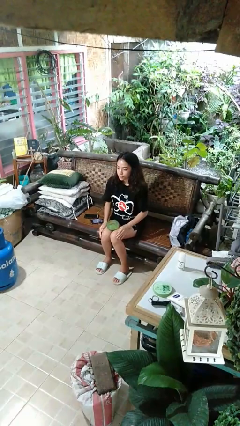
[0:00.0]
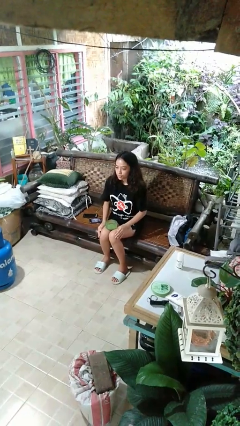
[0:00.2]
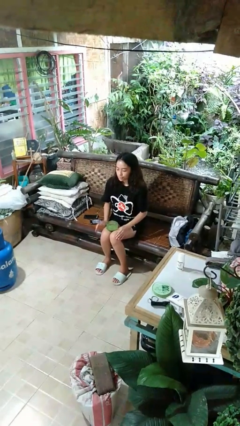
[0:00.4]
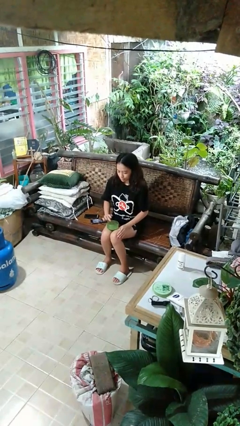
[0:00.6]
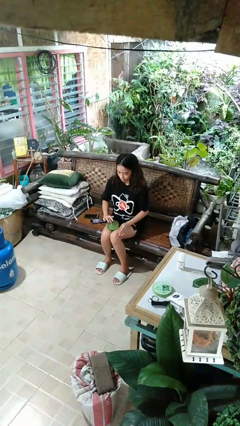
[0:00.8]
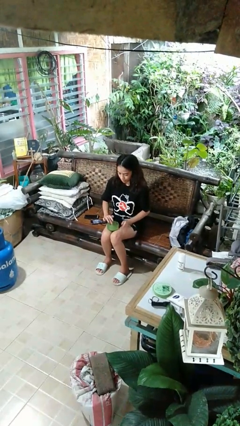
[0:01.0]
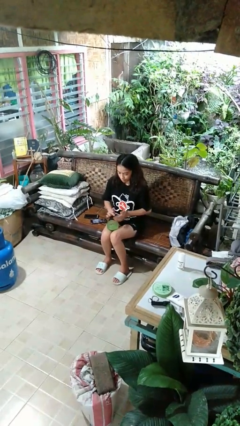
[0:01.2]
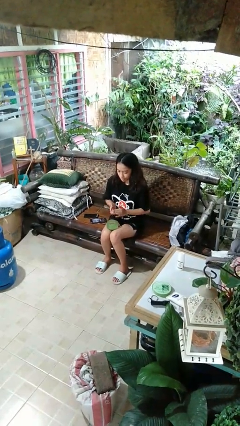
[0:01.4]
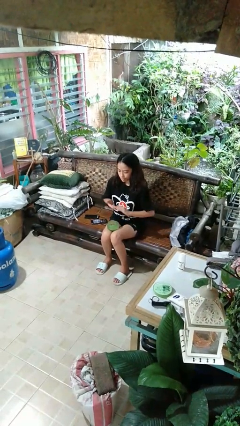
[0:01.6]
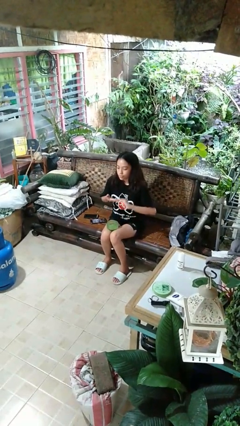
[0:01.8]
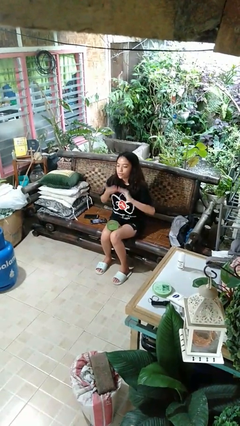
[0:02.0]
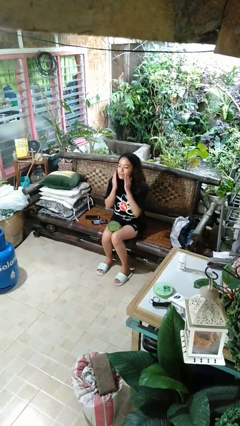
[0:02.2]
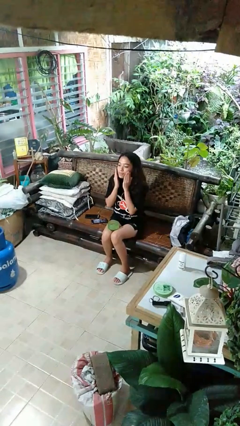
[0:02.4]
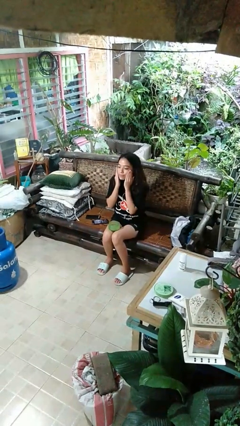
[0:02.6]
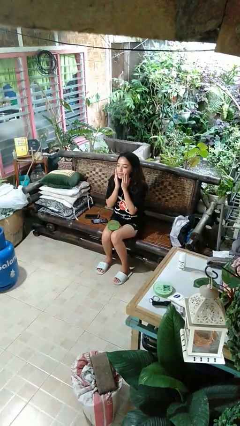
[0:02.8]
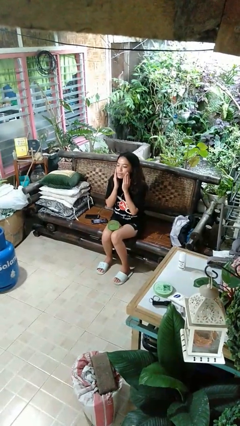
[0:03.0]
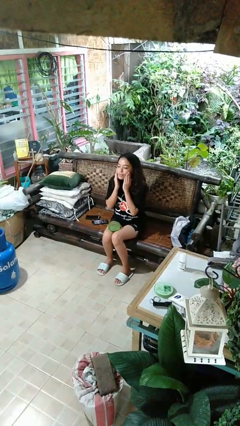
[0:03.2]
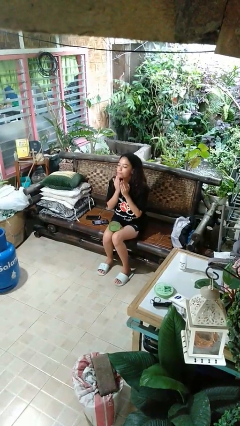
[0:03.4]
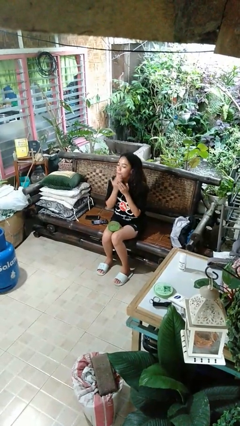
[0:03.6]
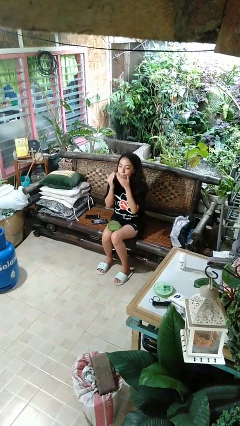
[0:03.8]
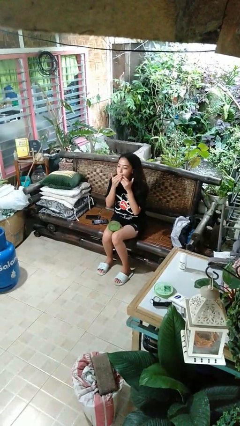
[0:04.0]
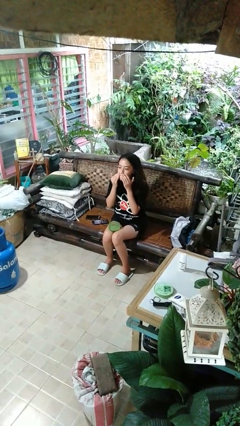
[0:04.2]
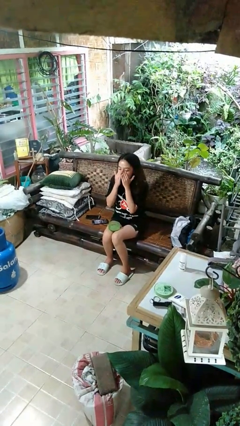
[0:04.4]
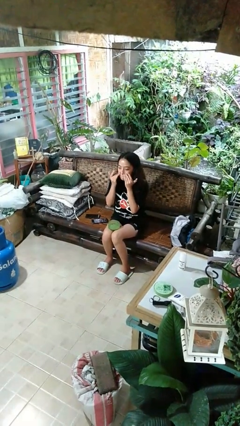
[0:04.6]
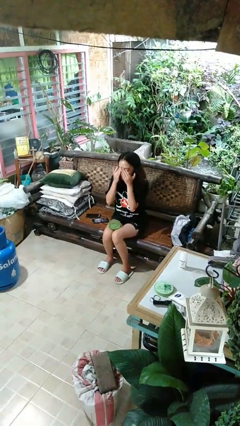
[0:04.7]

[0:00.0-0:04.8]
person applies facial moisturizer

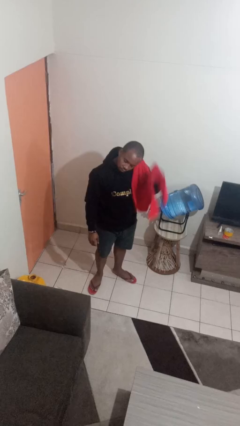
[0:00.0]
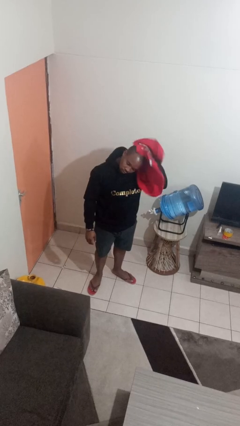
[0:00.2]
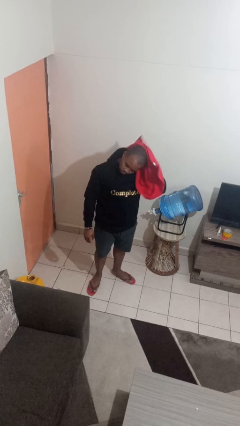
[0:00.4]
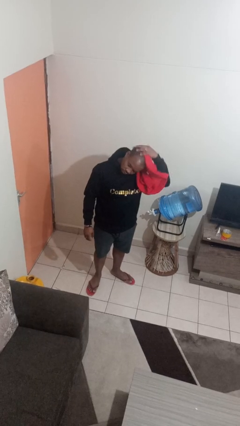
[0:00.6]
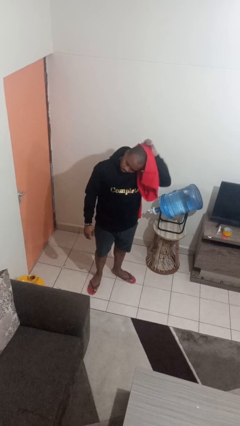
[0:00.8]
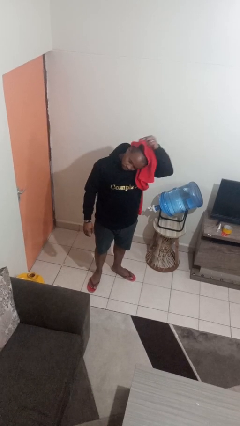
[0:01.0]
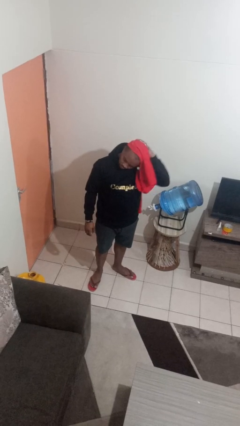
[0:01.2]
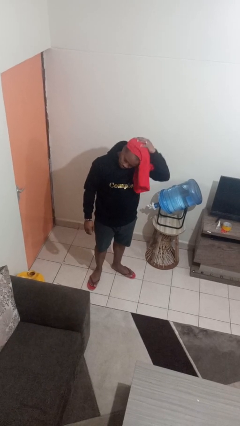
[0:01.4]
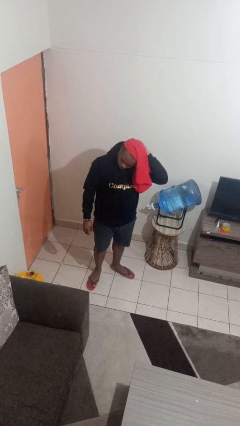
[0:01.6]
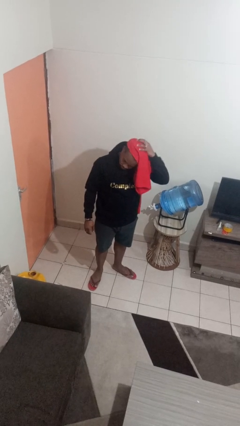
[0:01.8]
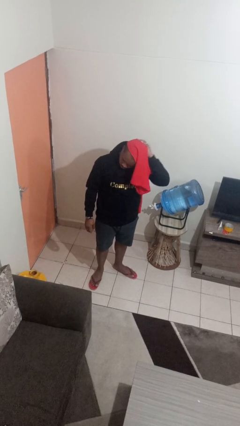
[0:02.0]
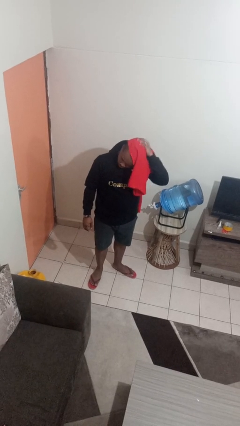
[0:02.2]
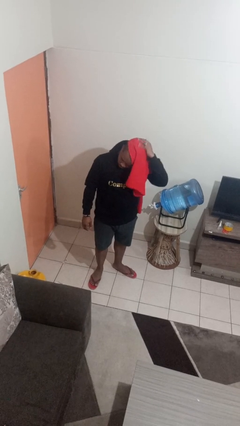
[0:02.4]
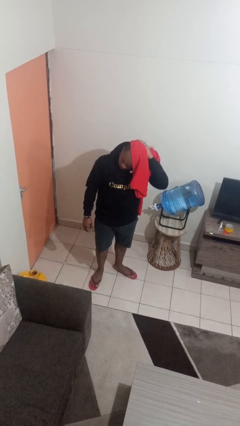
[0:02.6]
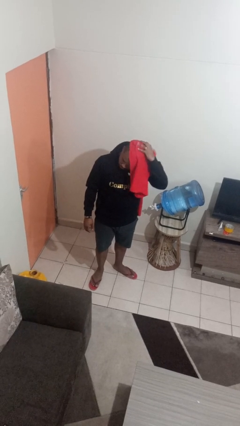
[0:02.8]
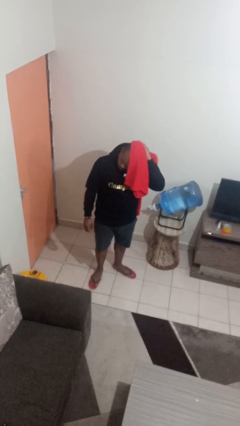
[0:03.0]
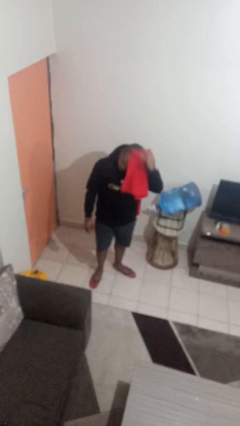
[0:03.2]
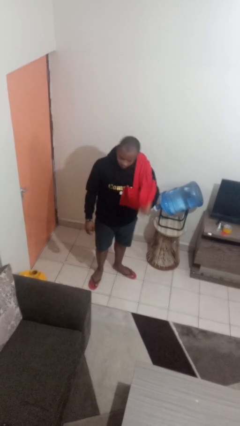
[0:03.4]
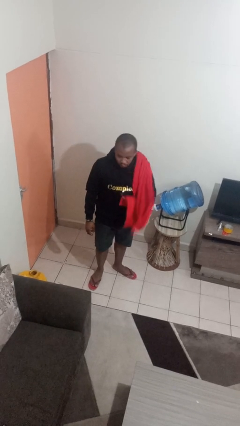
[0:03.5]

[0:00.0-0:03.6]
person dries hair with towel

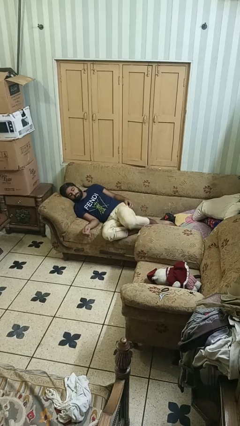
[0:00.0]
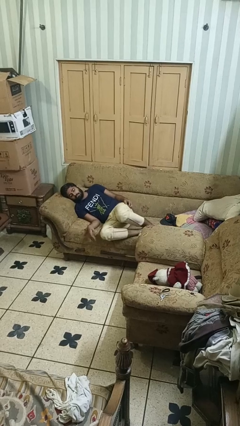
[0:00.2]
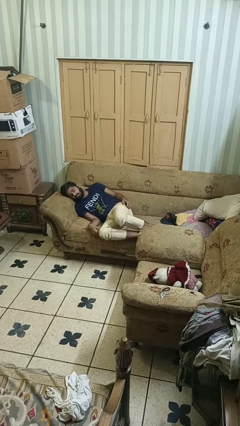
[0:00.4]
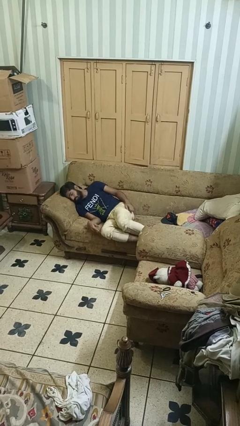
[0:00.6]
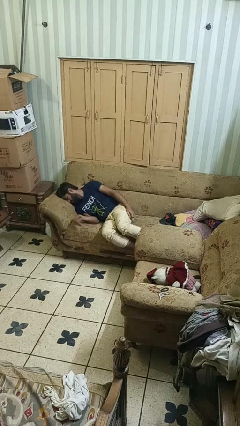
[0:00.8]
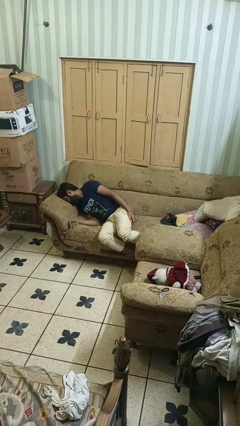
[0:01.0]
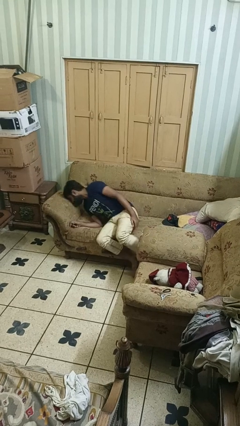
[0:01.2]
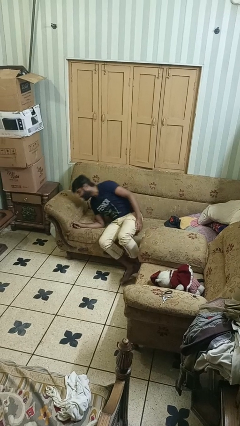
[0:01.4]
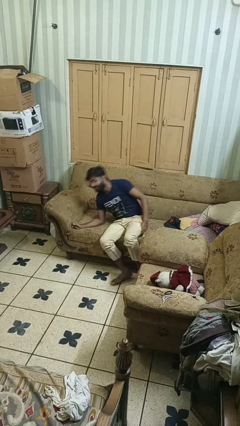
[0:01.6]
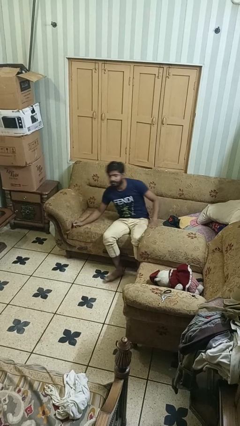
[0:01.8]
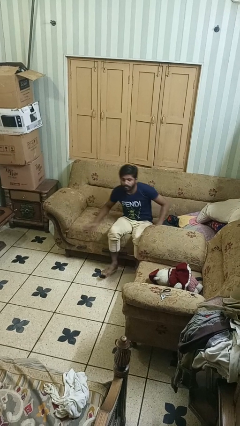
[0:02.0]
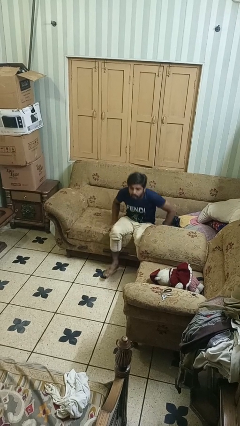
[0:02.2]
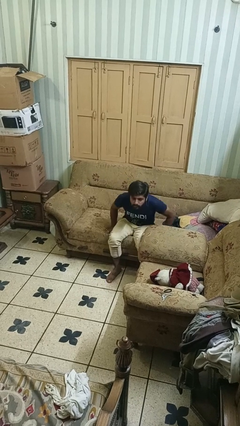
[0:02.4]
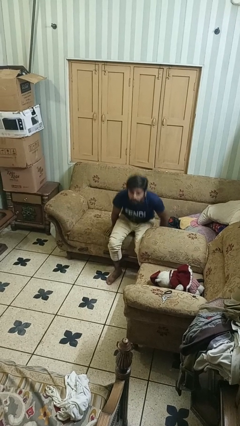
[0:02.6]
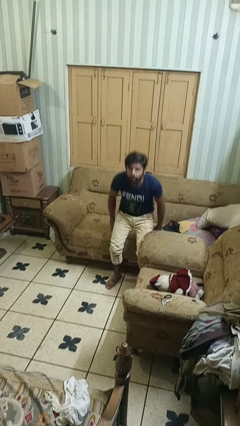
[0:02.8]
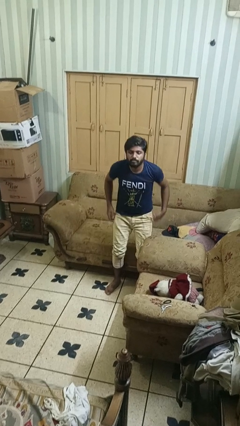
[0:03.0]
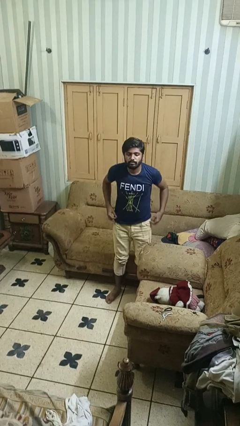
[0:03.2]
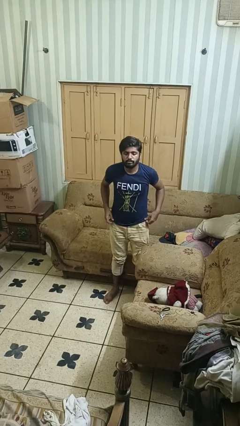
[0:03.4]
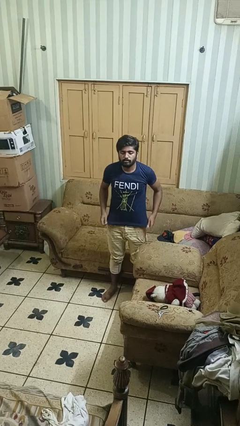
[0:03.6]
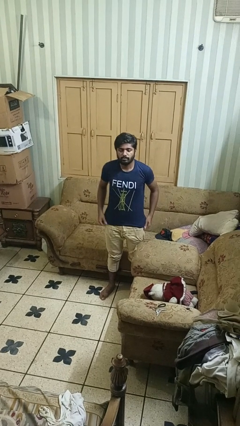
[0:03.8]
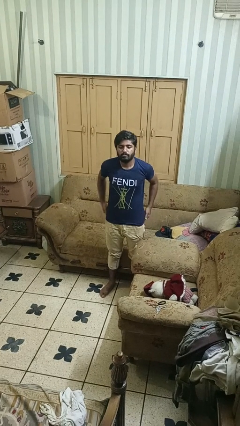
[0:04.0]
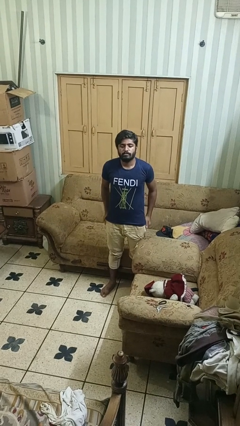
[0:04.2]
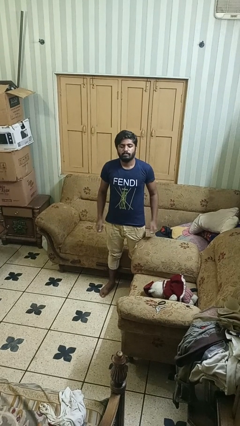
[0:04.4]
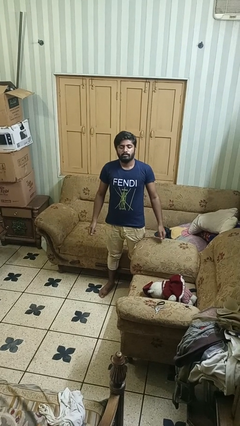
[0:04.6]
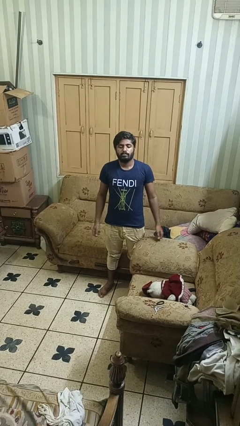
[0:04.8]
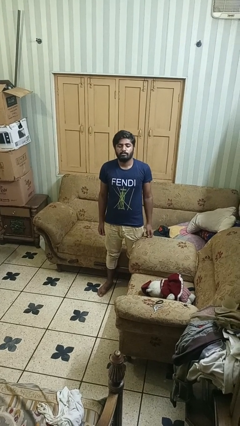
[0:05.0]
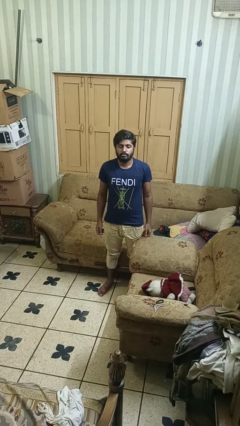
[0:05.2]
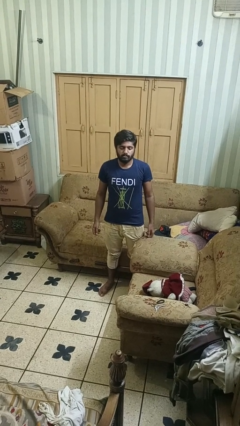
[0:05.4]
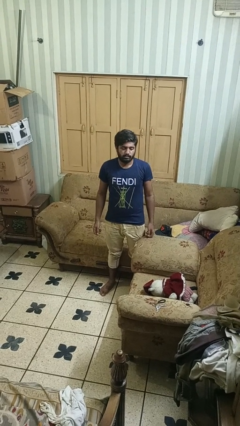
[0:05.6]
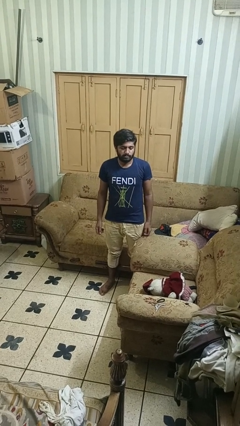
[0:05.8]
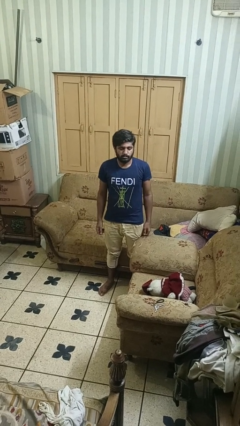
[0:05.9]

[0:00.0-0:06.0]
person stands up

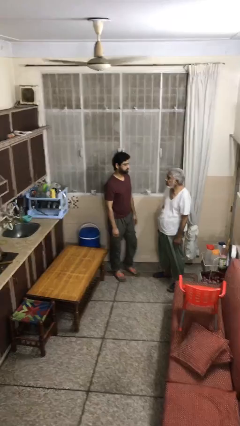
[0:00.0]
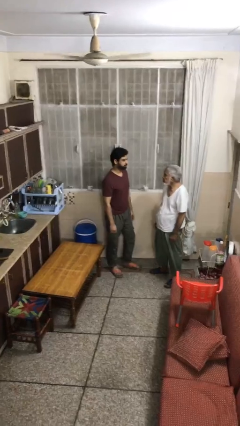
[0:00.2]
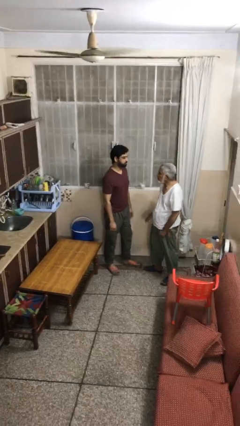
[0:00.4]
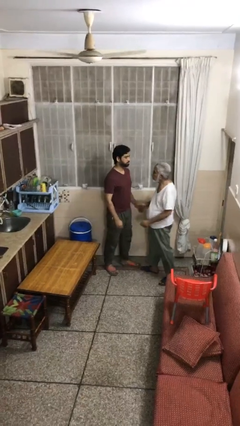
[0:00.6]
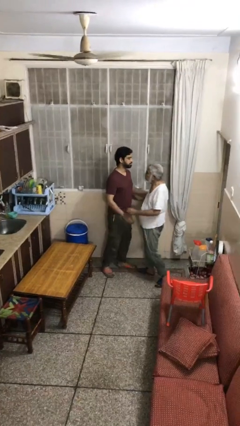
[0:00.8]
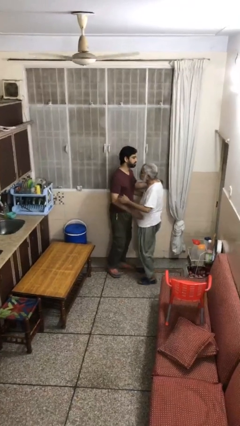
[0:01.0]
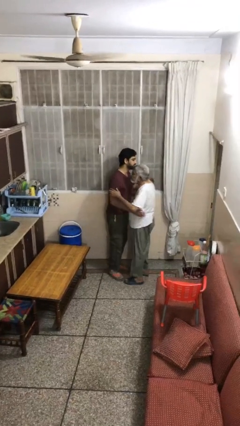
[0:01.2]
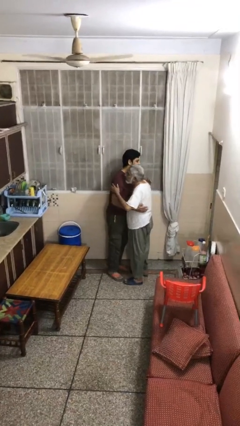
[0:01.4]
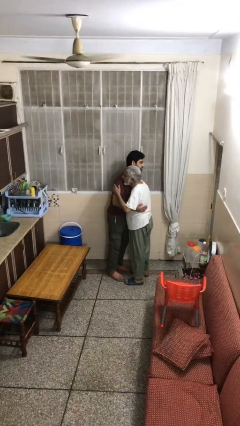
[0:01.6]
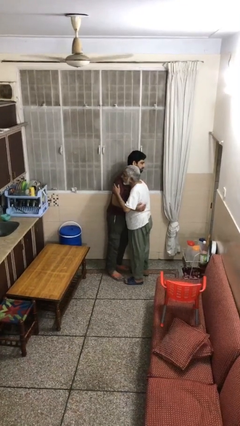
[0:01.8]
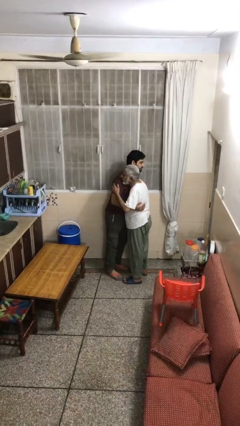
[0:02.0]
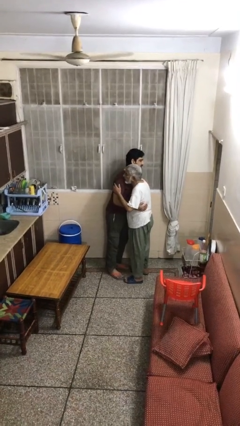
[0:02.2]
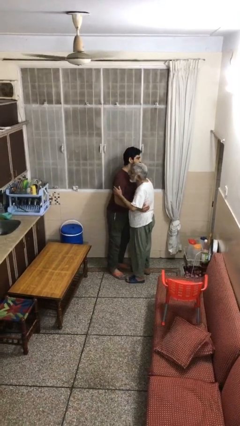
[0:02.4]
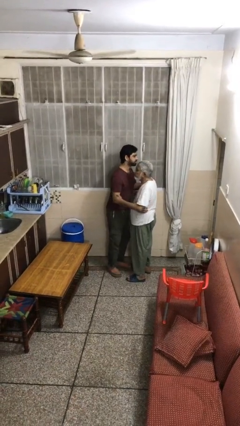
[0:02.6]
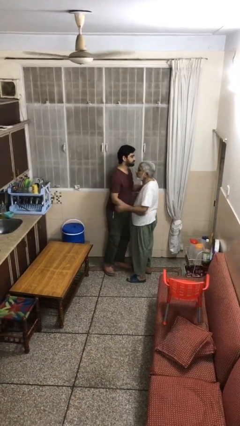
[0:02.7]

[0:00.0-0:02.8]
person embraces person

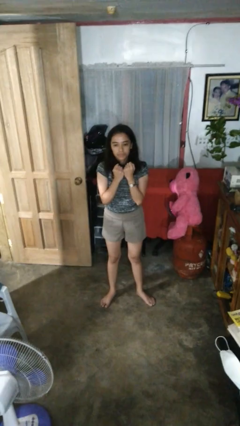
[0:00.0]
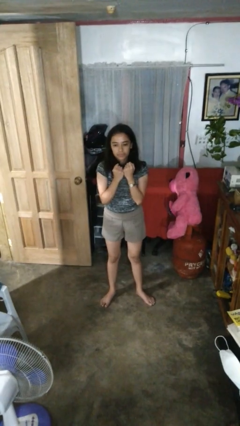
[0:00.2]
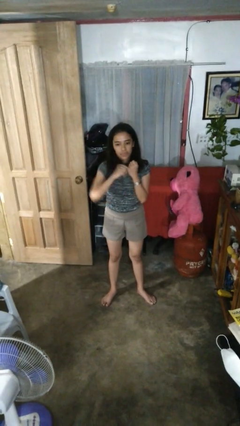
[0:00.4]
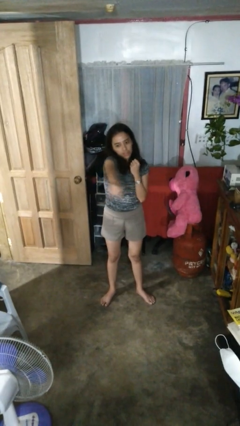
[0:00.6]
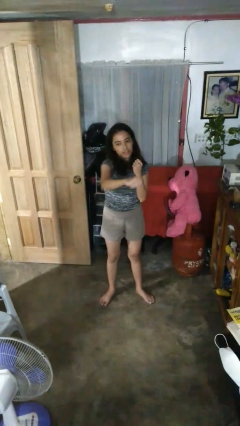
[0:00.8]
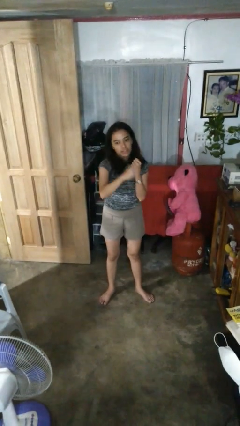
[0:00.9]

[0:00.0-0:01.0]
person punches
